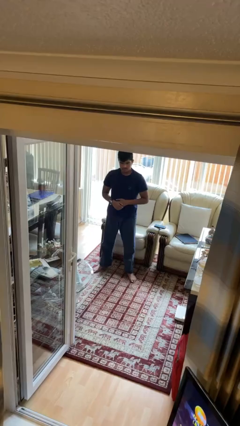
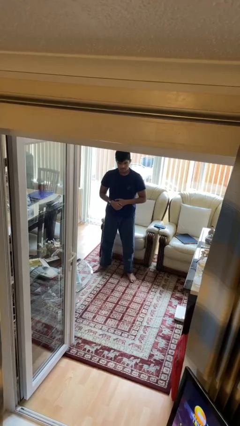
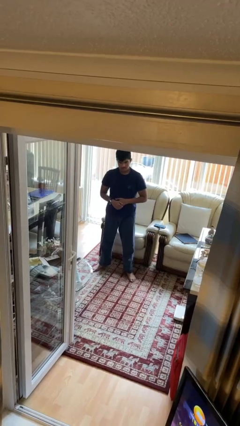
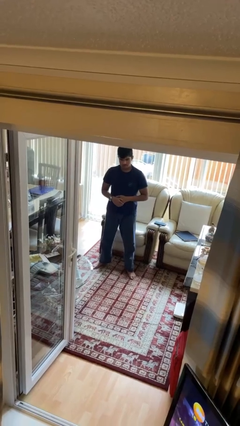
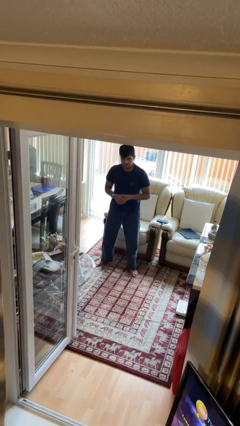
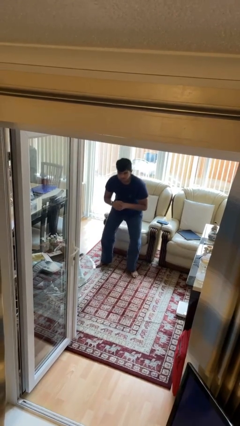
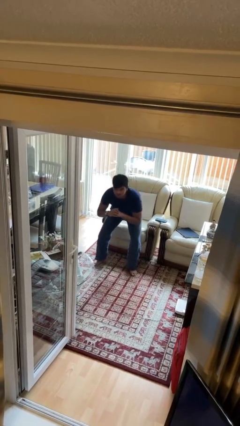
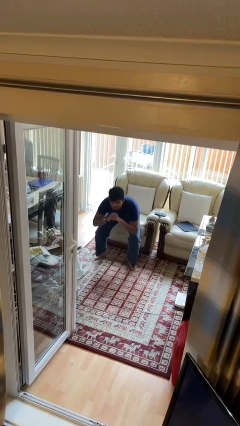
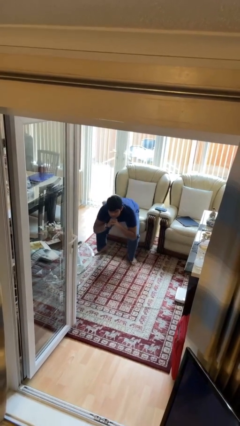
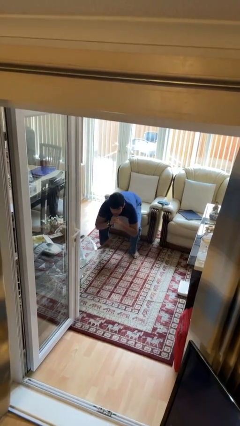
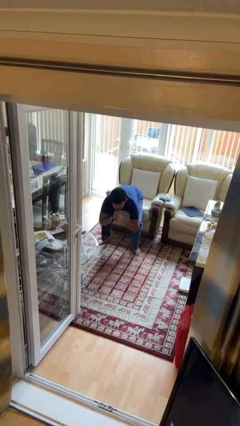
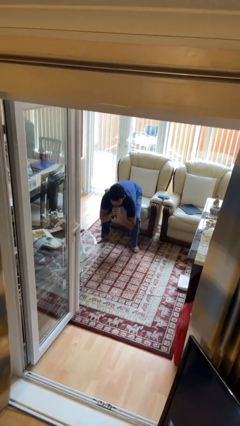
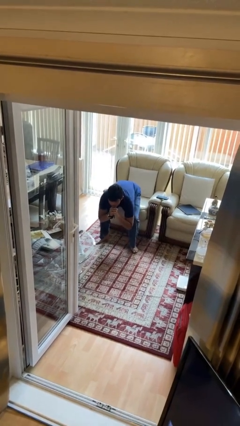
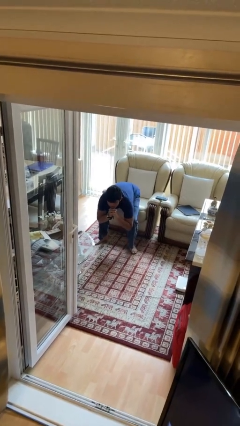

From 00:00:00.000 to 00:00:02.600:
person squats

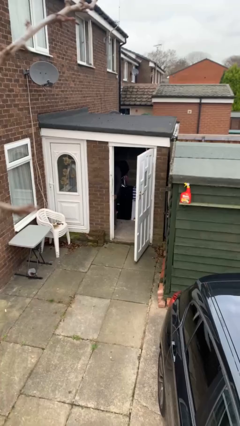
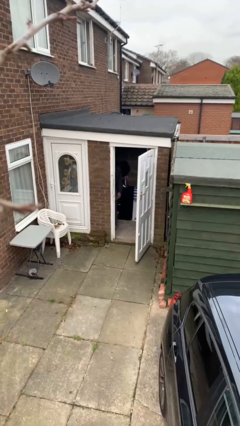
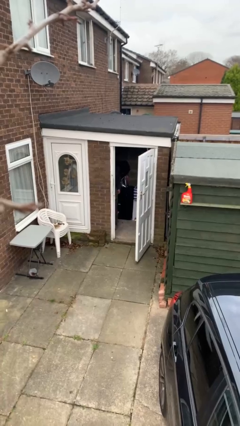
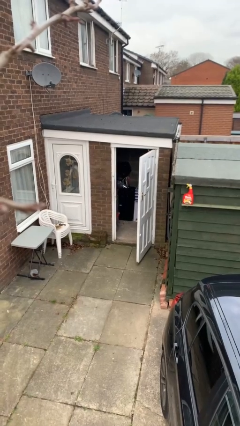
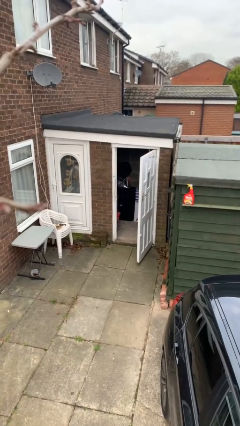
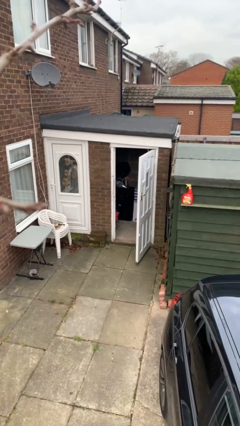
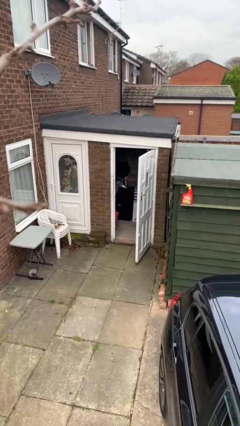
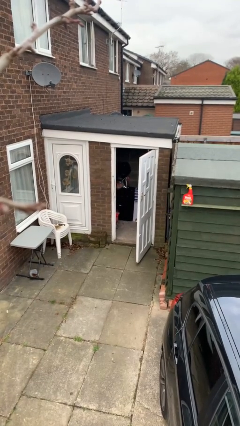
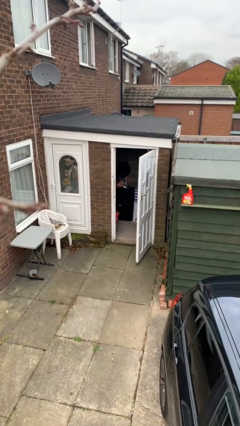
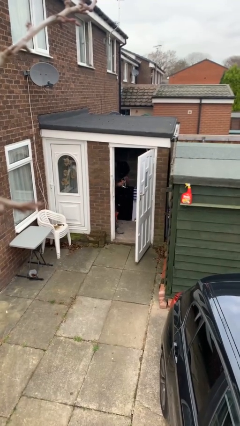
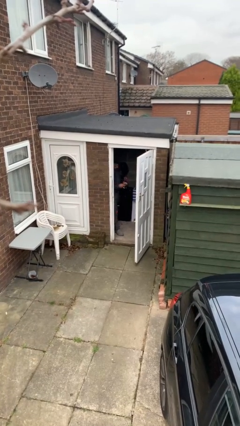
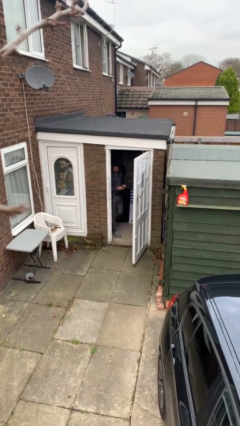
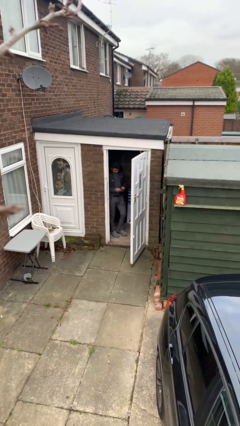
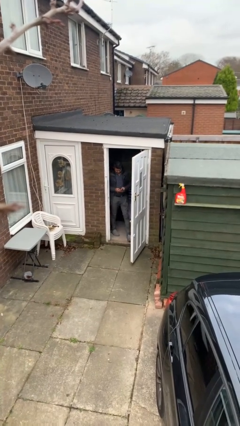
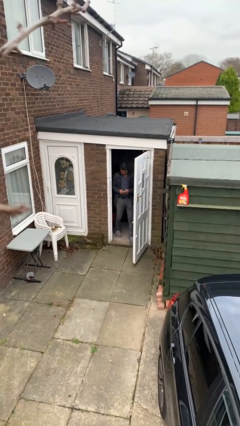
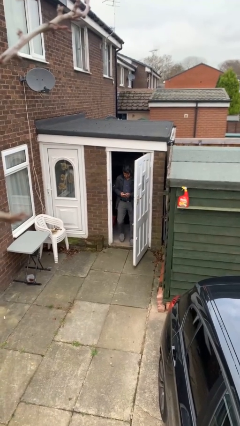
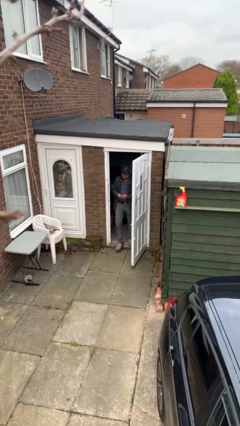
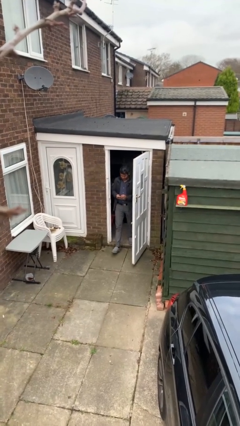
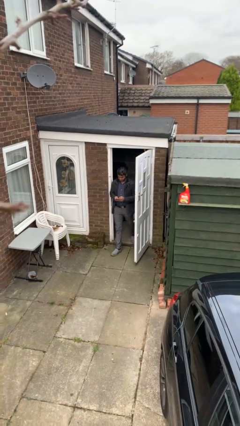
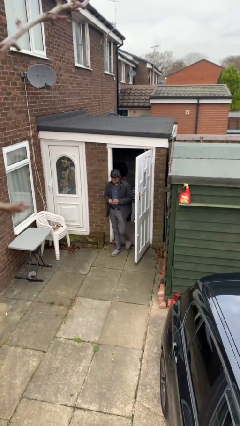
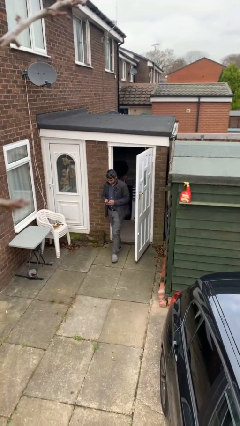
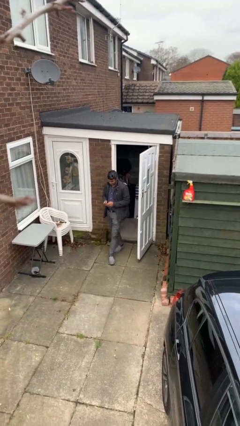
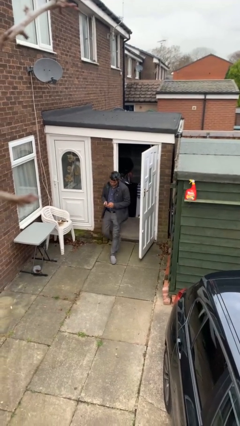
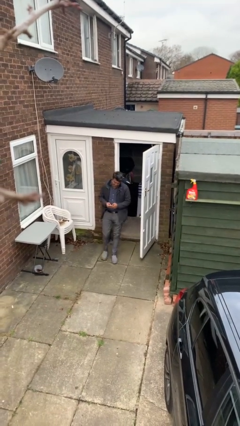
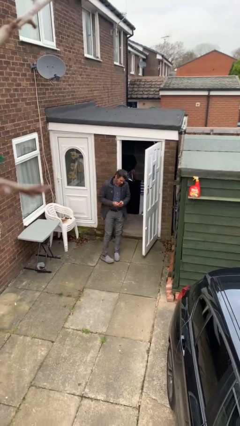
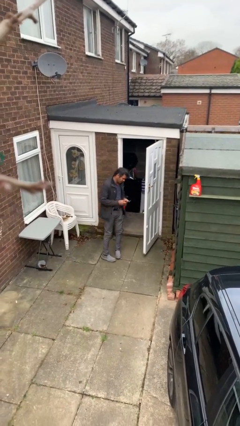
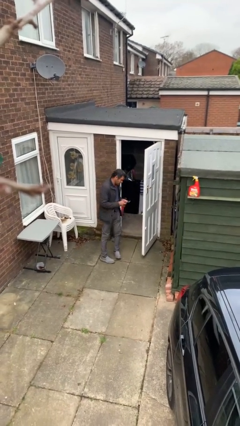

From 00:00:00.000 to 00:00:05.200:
person enters scene through structure

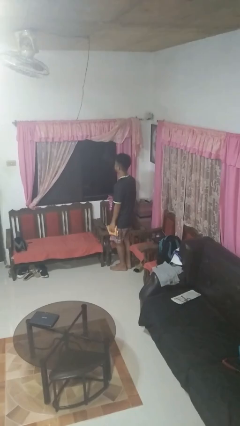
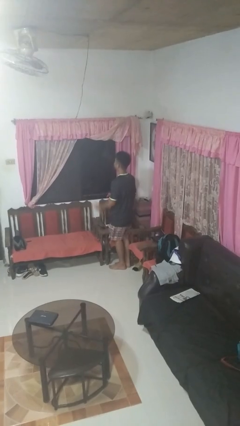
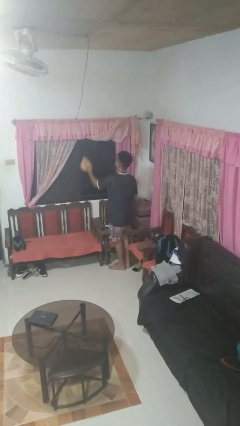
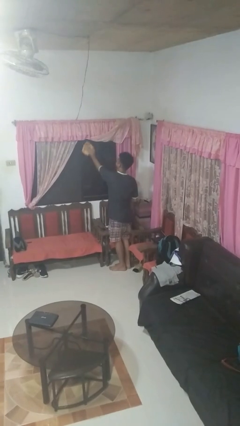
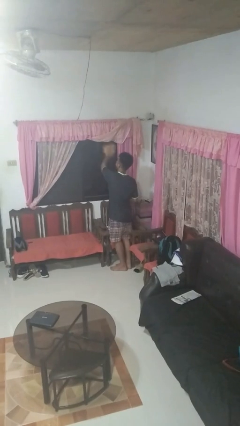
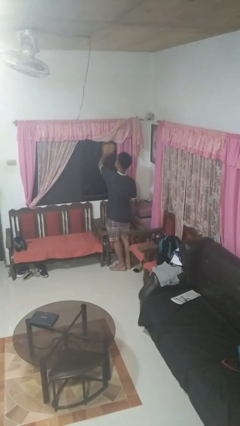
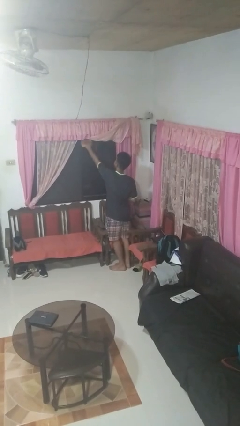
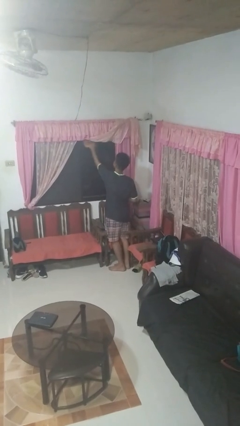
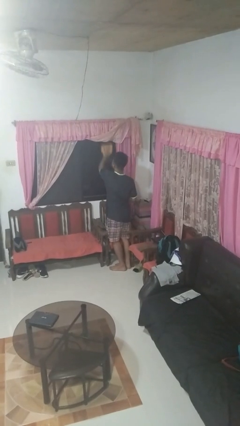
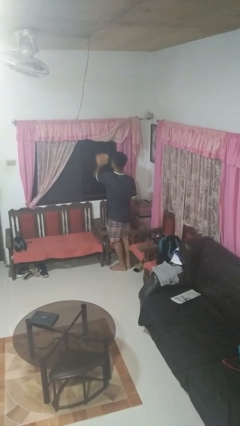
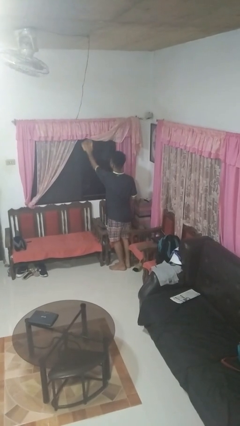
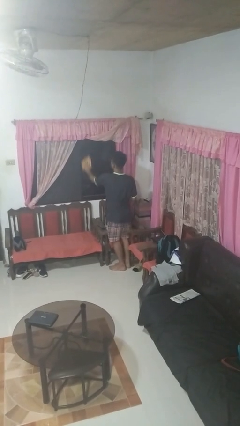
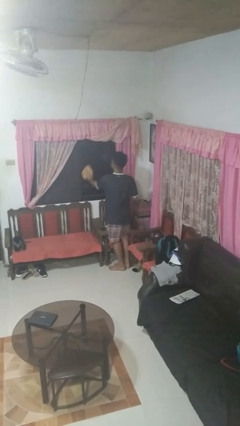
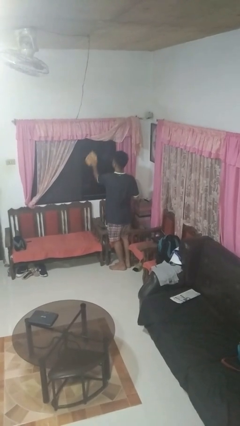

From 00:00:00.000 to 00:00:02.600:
person washes window

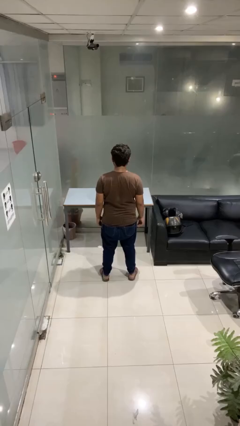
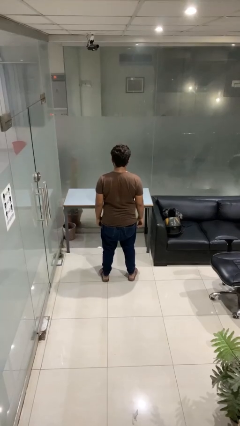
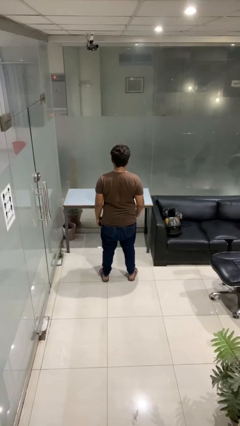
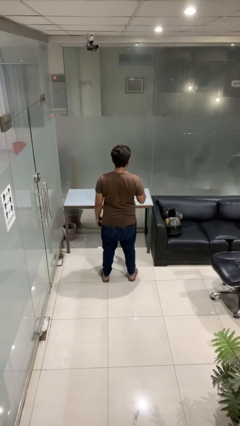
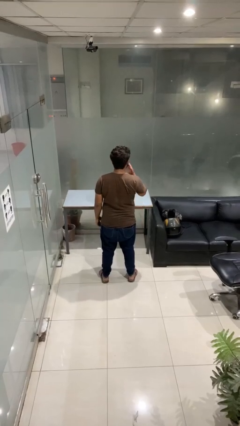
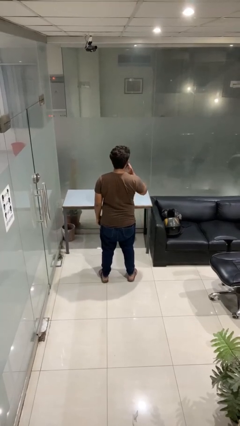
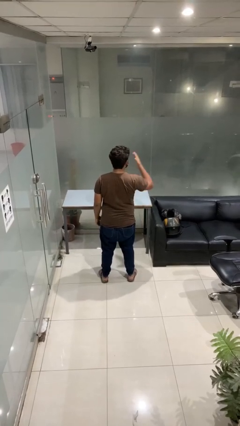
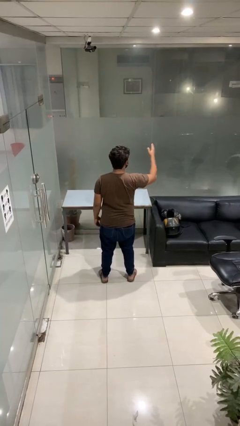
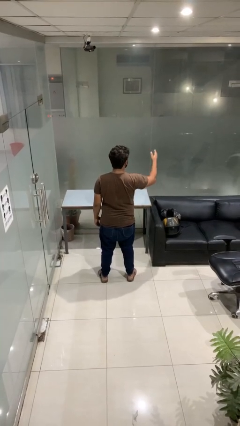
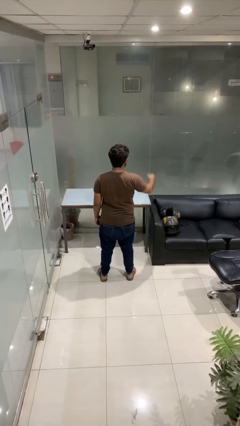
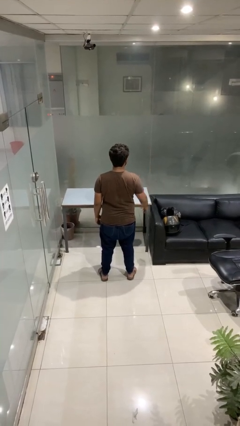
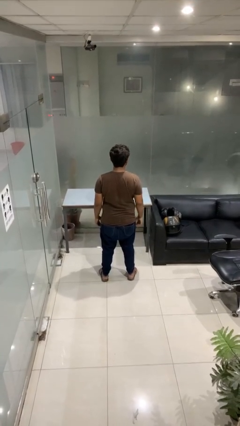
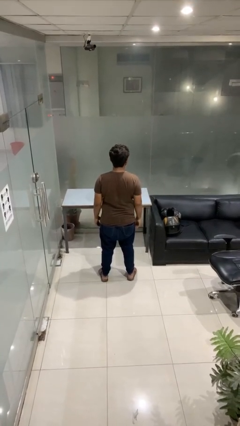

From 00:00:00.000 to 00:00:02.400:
person gestures blow kiss

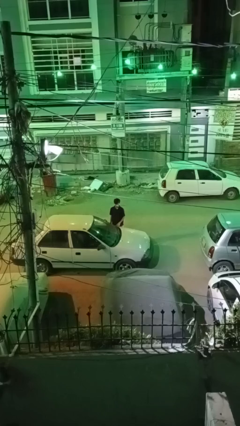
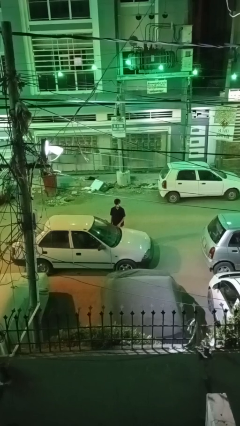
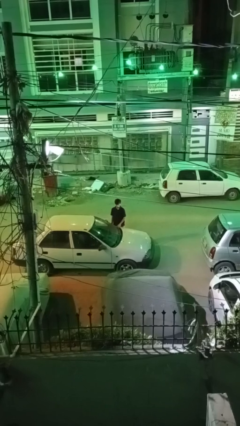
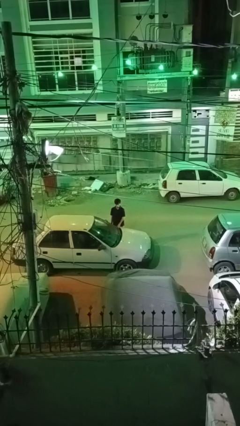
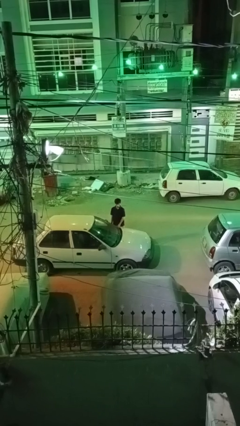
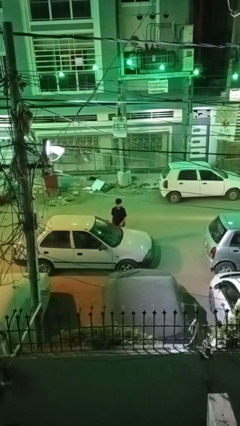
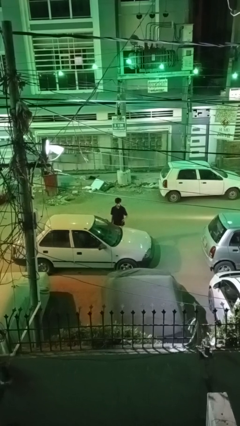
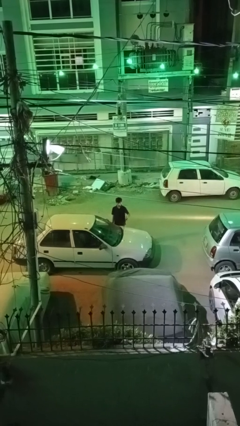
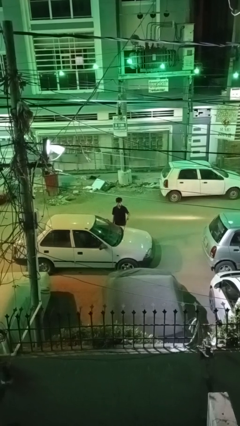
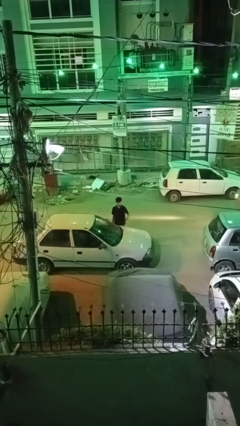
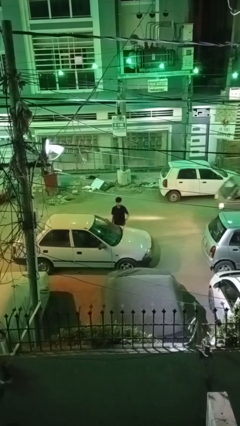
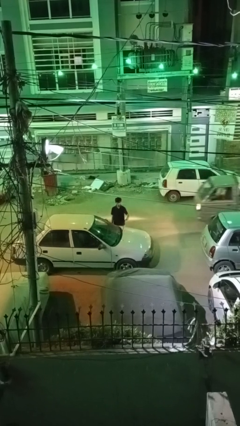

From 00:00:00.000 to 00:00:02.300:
person flips up car wipers

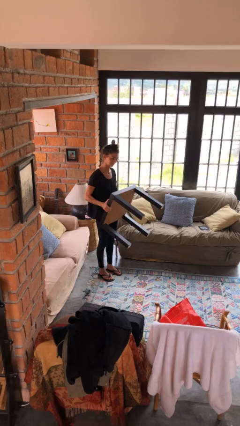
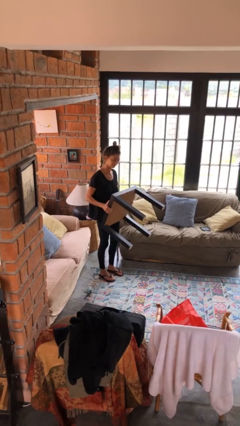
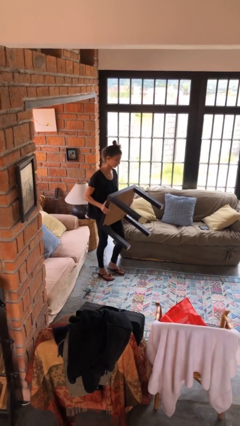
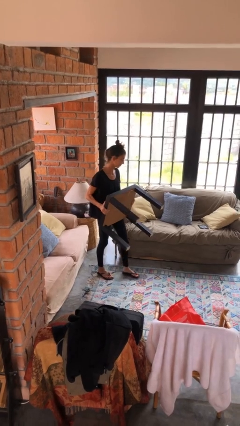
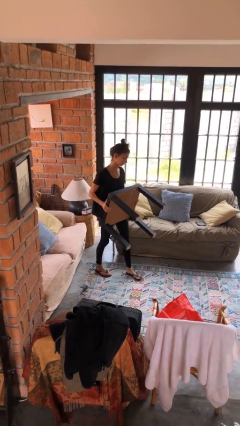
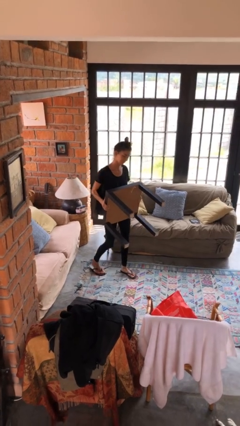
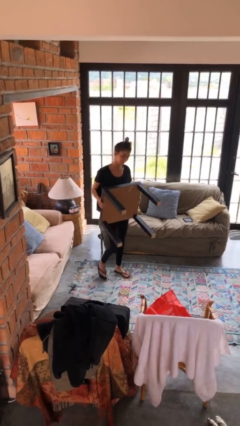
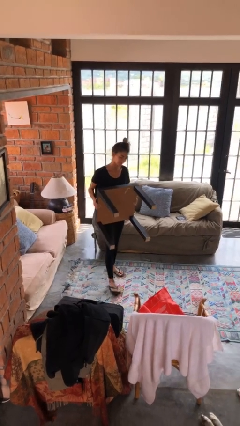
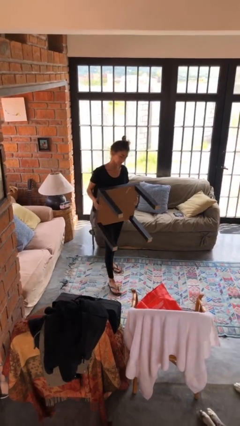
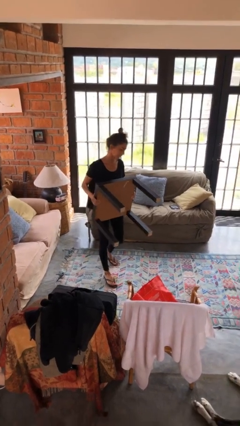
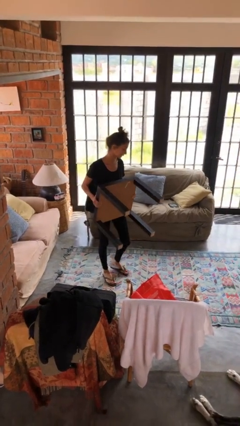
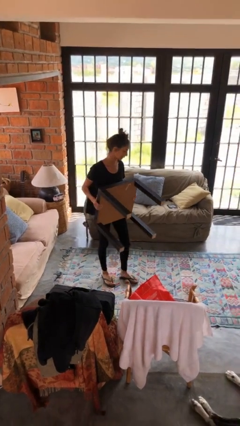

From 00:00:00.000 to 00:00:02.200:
person carries furniture
